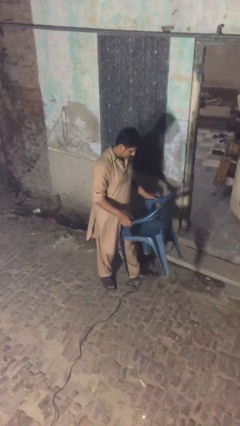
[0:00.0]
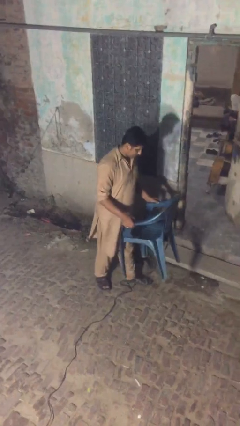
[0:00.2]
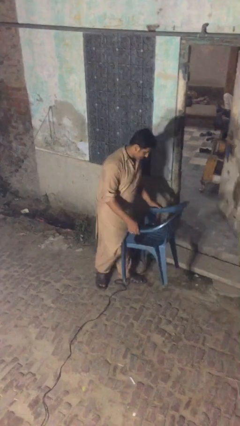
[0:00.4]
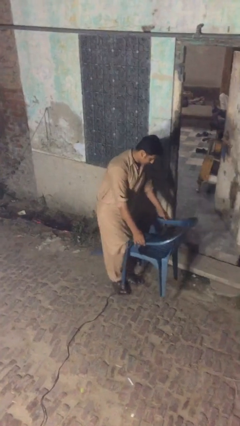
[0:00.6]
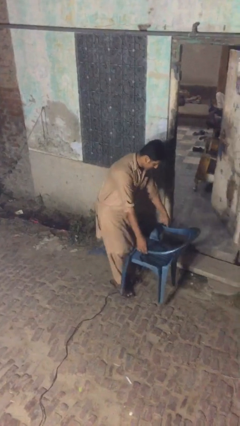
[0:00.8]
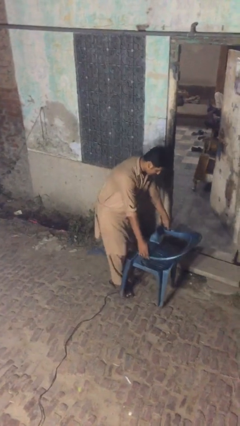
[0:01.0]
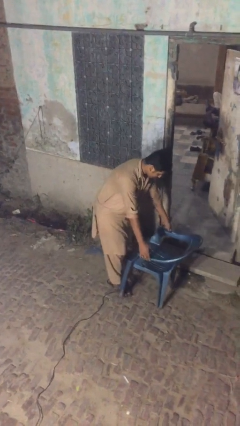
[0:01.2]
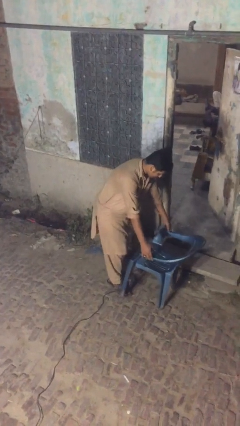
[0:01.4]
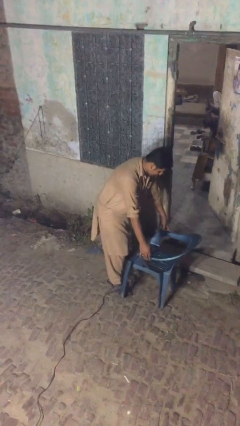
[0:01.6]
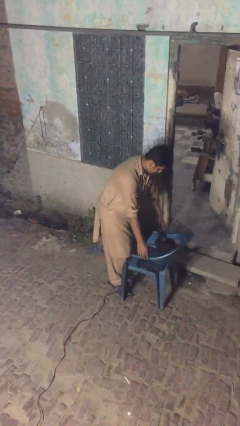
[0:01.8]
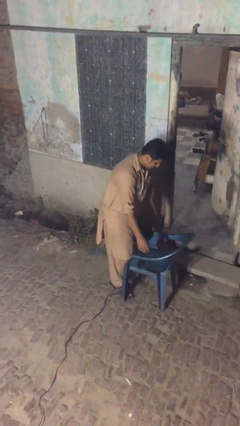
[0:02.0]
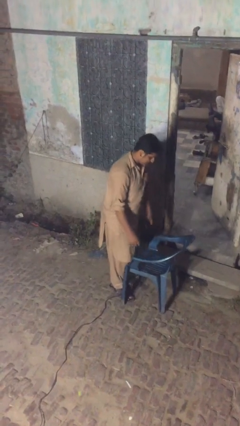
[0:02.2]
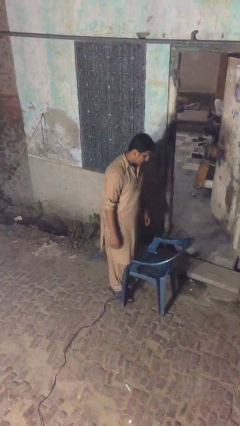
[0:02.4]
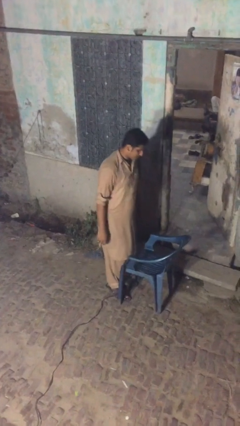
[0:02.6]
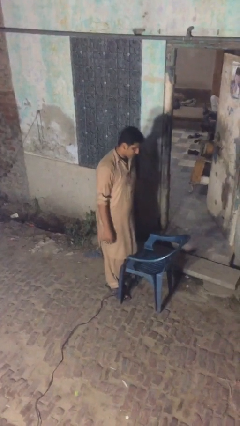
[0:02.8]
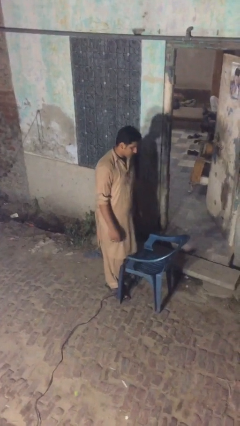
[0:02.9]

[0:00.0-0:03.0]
person puts down object on floor

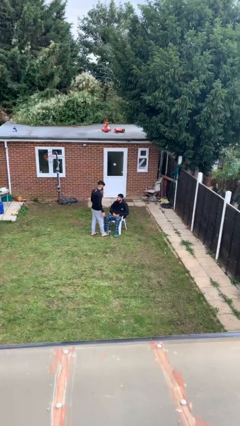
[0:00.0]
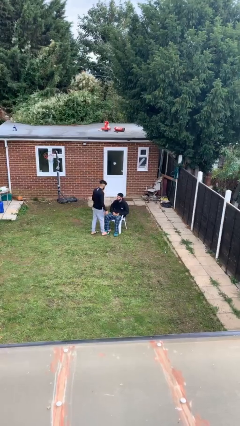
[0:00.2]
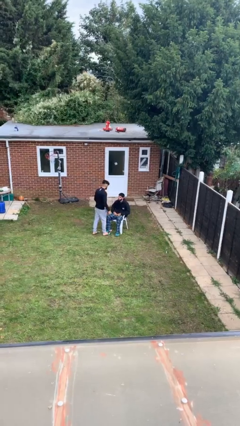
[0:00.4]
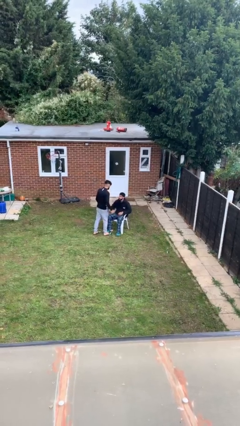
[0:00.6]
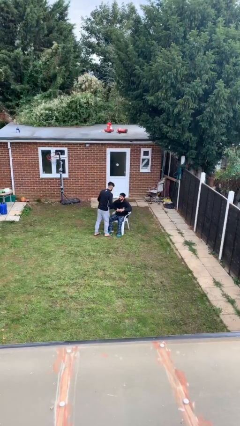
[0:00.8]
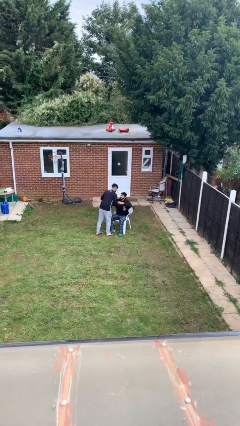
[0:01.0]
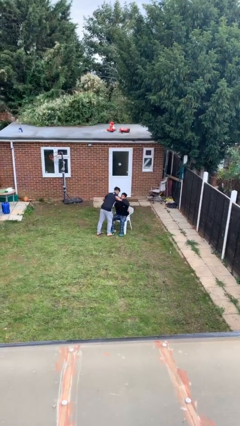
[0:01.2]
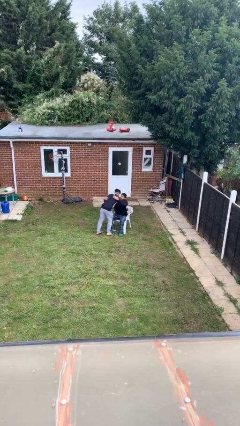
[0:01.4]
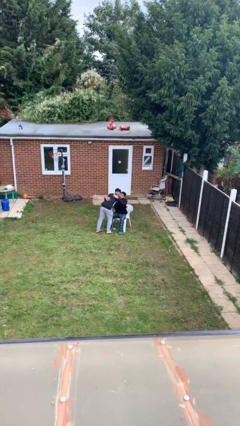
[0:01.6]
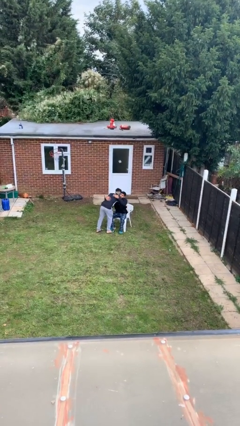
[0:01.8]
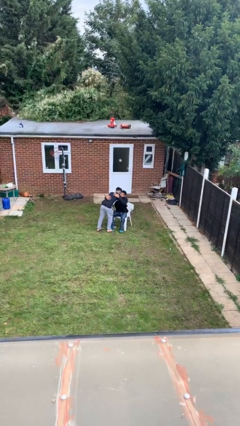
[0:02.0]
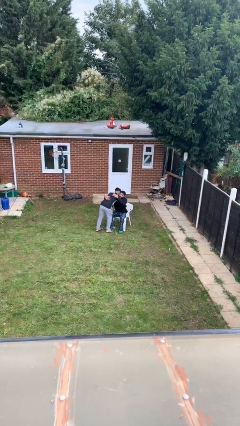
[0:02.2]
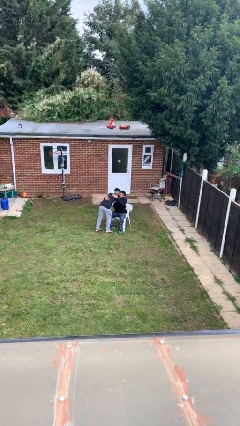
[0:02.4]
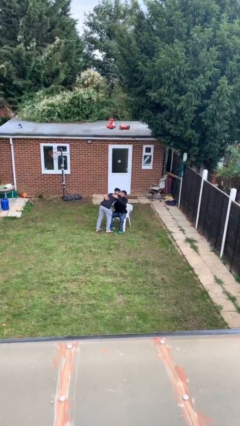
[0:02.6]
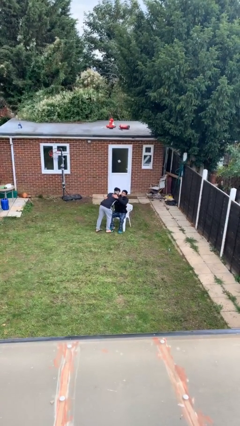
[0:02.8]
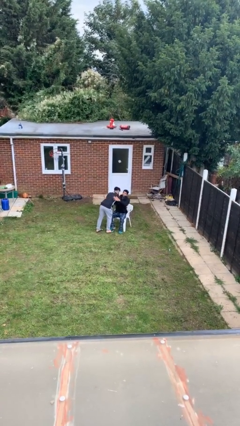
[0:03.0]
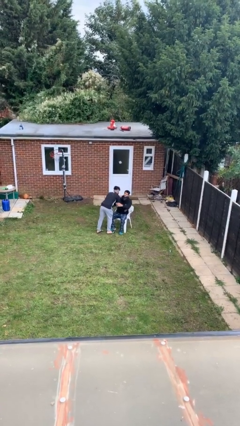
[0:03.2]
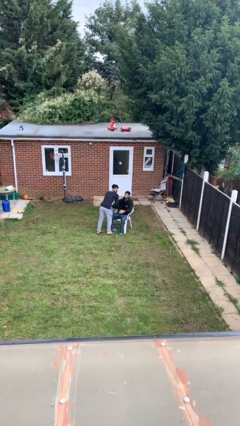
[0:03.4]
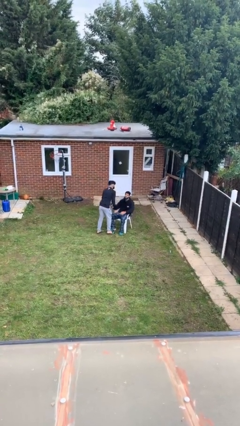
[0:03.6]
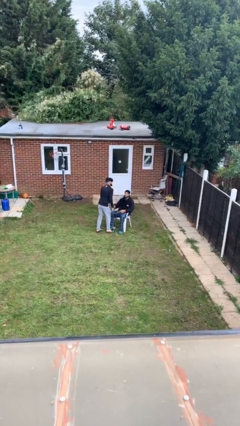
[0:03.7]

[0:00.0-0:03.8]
person embraces person
